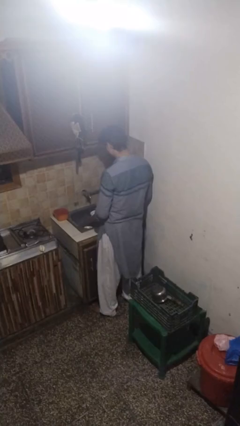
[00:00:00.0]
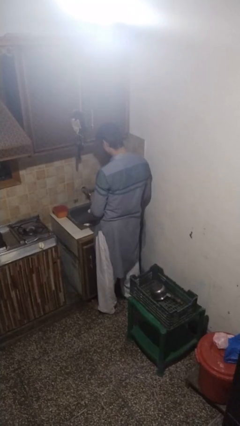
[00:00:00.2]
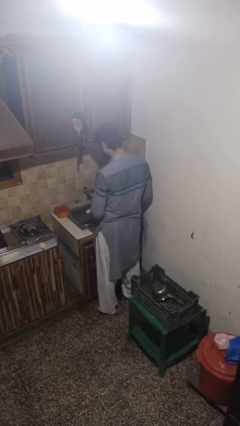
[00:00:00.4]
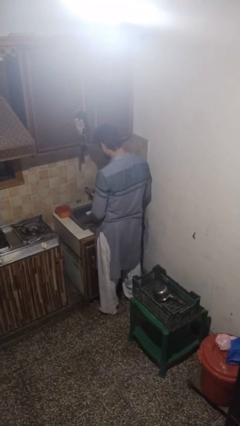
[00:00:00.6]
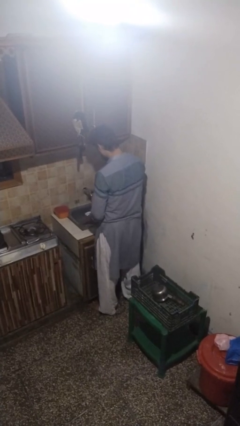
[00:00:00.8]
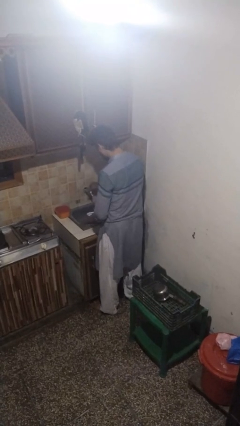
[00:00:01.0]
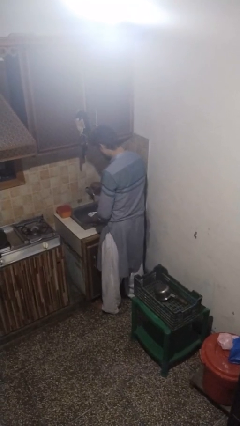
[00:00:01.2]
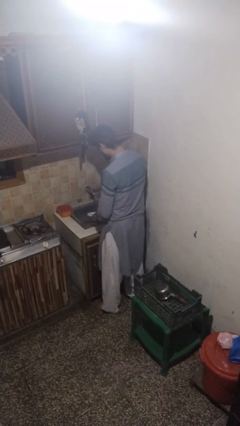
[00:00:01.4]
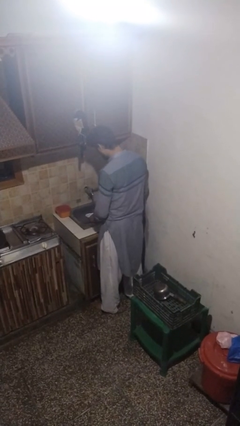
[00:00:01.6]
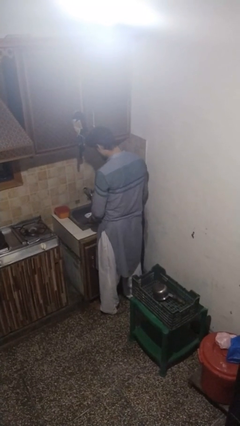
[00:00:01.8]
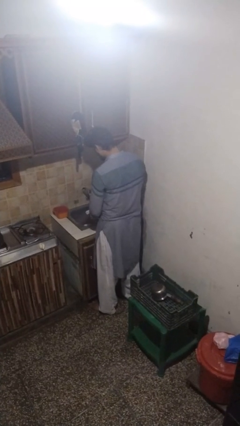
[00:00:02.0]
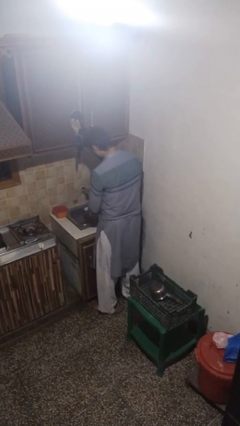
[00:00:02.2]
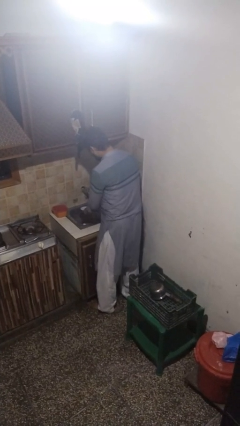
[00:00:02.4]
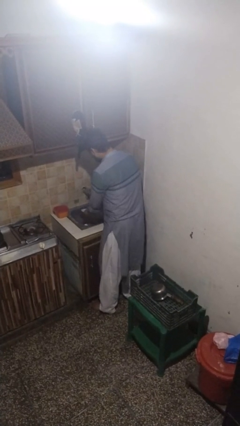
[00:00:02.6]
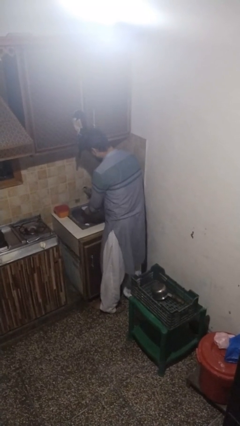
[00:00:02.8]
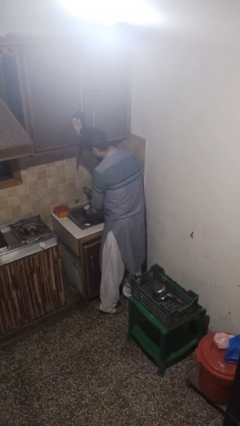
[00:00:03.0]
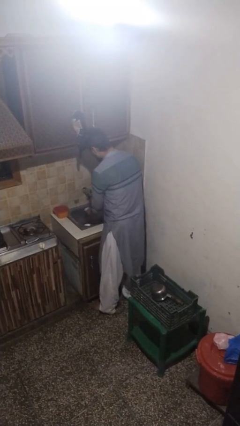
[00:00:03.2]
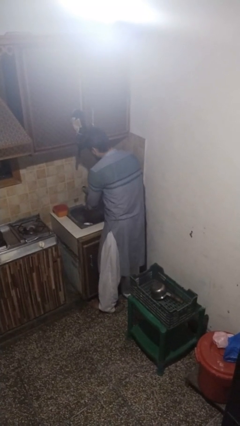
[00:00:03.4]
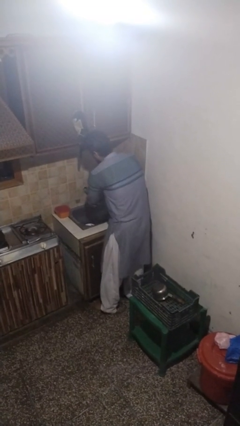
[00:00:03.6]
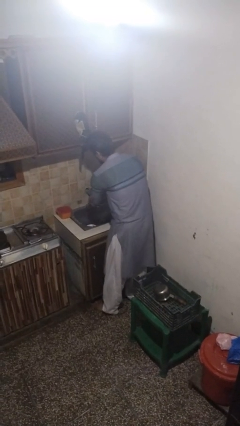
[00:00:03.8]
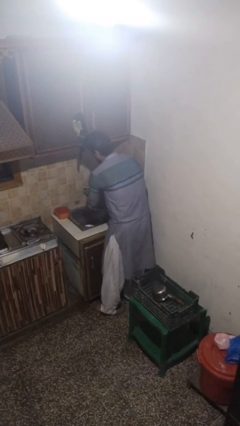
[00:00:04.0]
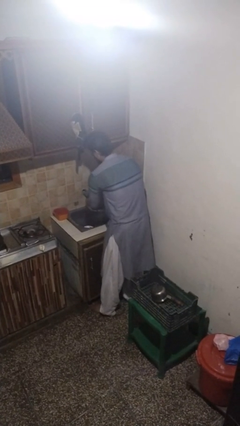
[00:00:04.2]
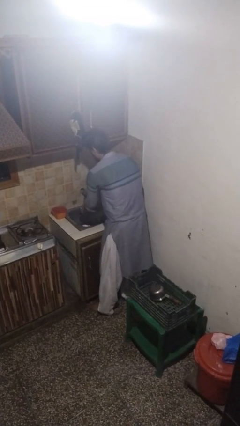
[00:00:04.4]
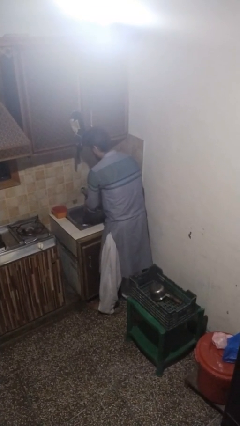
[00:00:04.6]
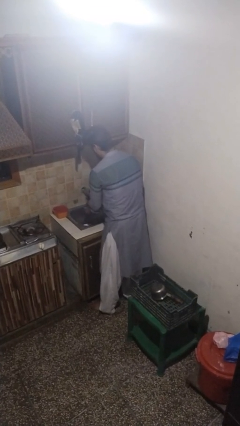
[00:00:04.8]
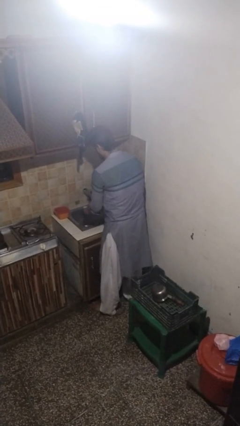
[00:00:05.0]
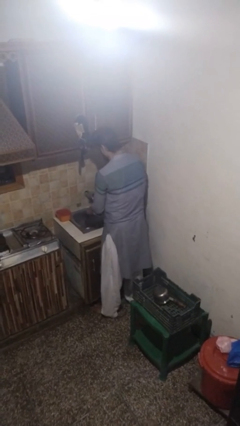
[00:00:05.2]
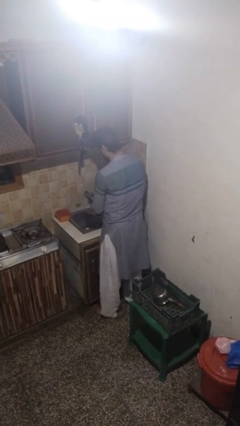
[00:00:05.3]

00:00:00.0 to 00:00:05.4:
person washes dish

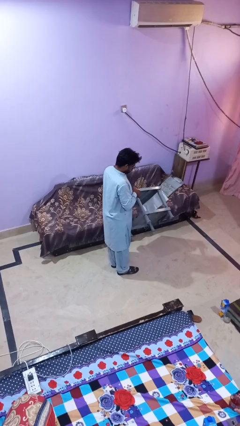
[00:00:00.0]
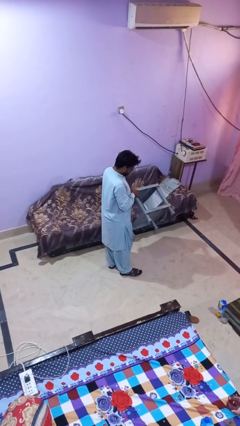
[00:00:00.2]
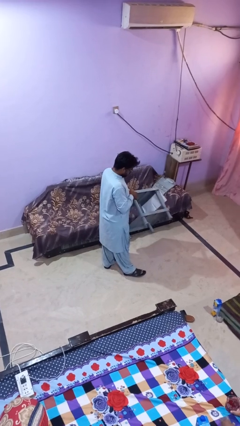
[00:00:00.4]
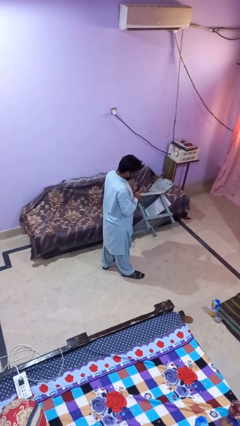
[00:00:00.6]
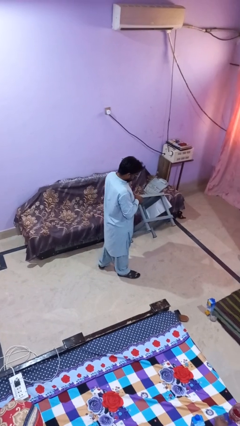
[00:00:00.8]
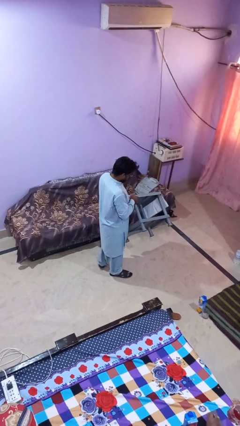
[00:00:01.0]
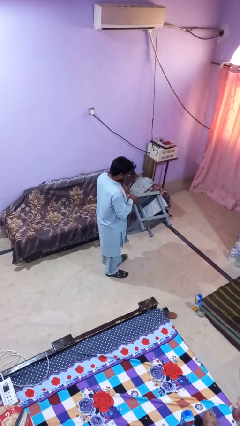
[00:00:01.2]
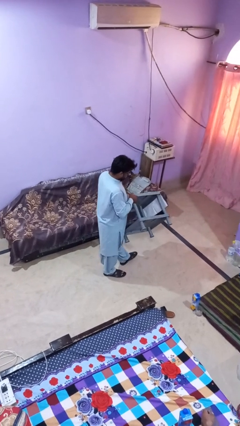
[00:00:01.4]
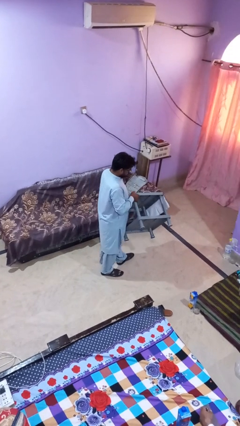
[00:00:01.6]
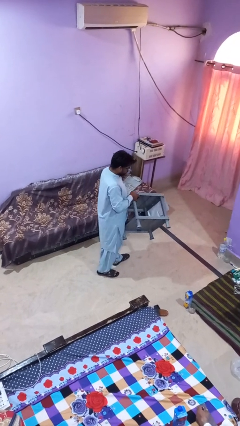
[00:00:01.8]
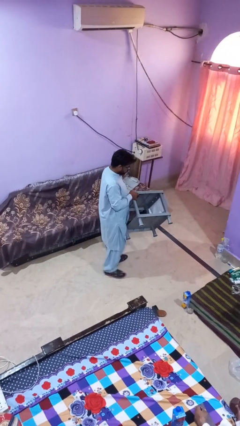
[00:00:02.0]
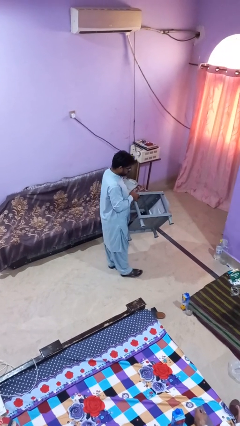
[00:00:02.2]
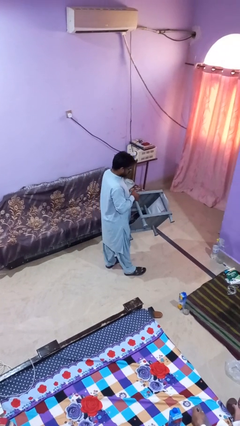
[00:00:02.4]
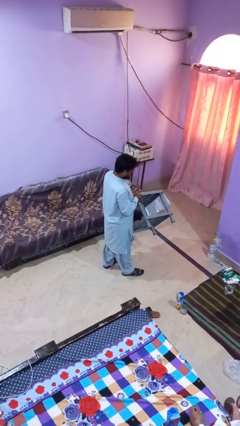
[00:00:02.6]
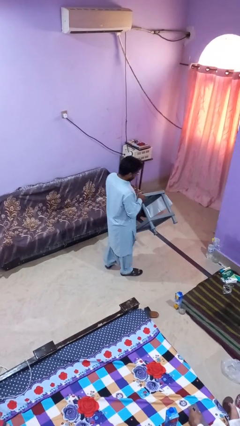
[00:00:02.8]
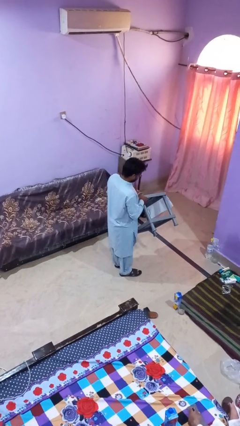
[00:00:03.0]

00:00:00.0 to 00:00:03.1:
person carries furniture

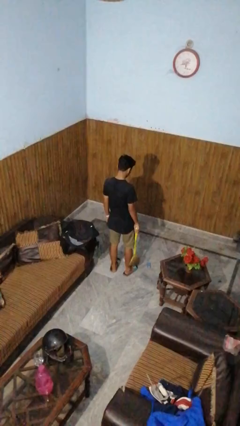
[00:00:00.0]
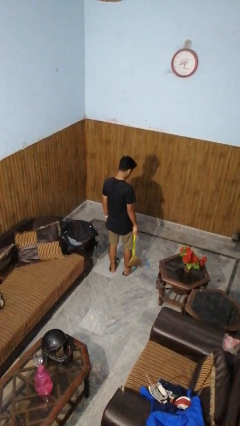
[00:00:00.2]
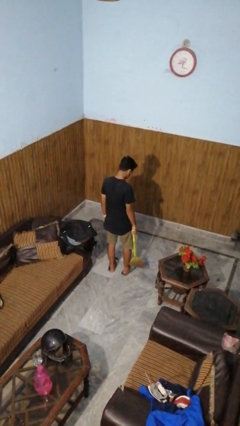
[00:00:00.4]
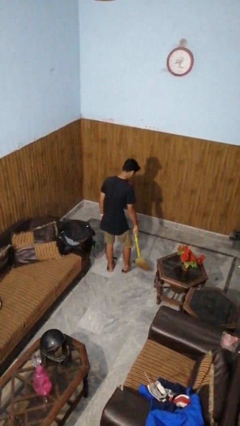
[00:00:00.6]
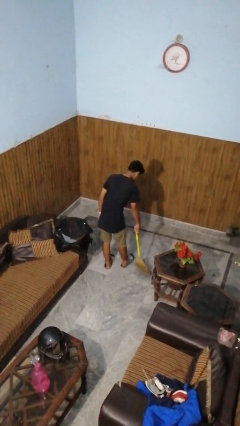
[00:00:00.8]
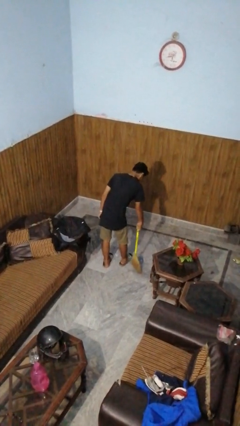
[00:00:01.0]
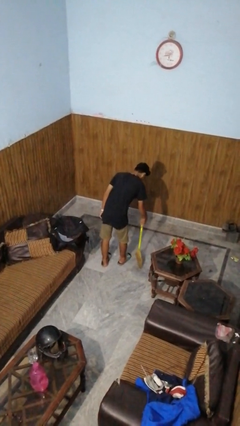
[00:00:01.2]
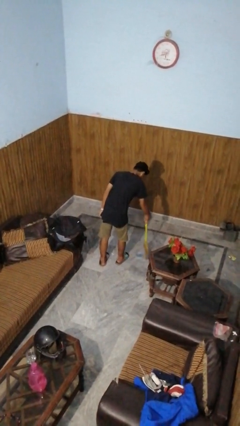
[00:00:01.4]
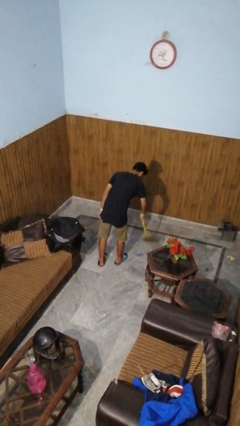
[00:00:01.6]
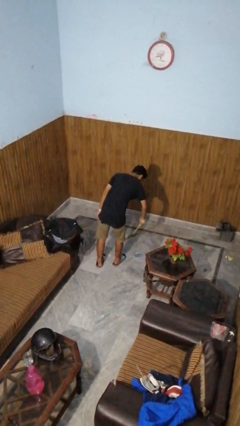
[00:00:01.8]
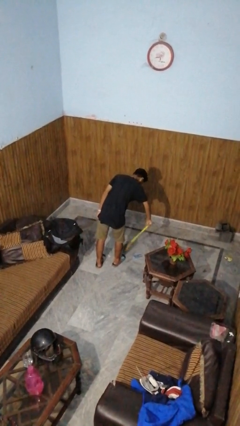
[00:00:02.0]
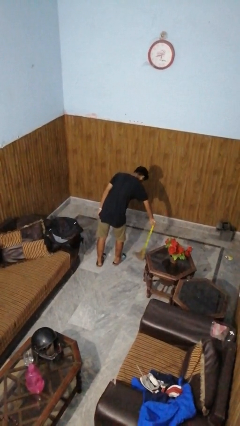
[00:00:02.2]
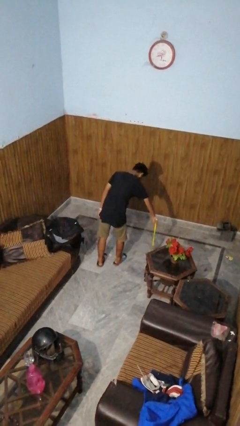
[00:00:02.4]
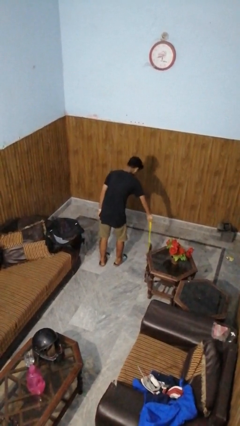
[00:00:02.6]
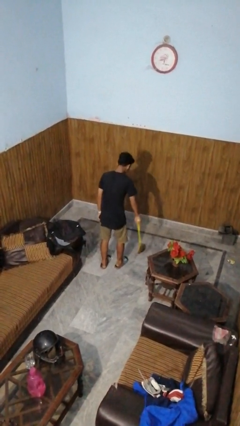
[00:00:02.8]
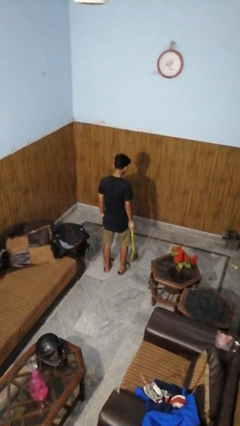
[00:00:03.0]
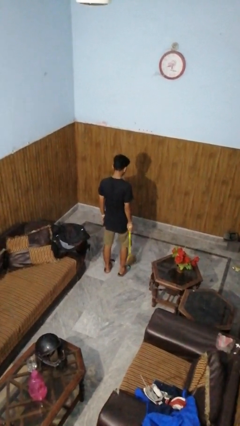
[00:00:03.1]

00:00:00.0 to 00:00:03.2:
person sweeps floor

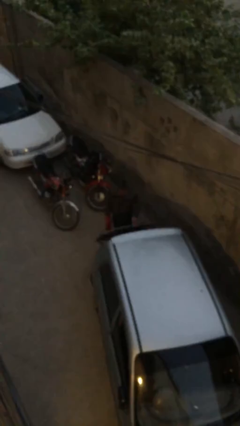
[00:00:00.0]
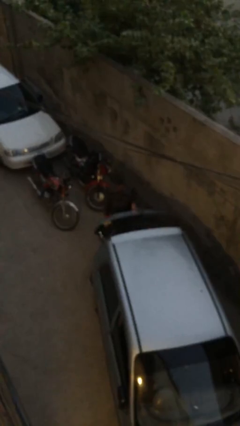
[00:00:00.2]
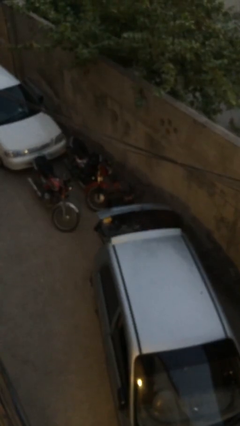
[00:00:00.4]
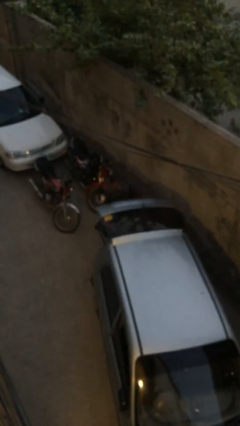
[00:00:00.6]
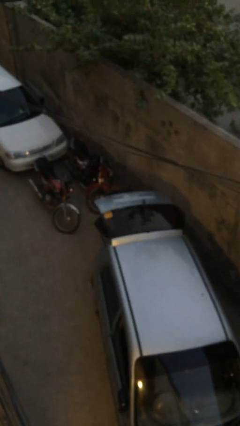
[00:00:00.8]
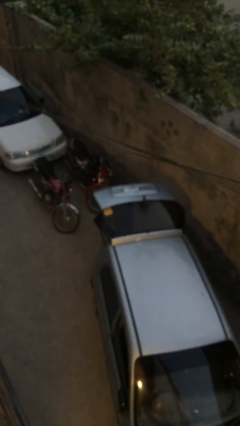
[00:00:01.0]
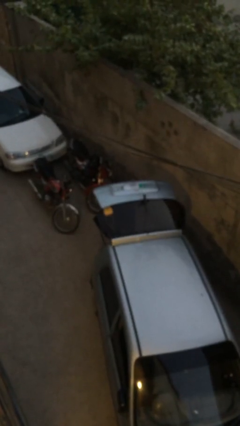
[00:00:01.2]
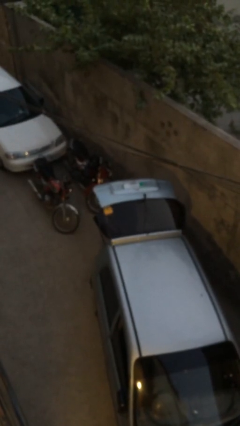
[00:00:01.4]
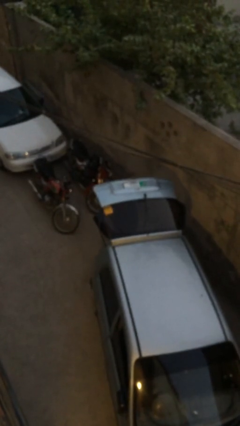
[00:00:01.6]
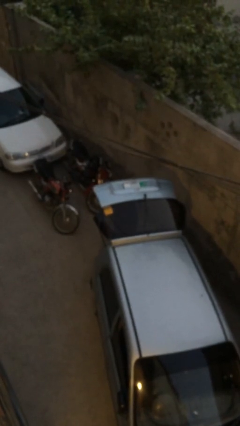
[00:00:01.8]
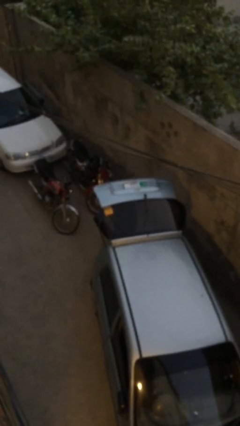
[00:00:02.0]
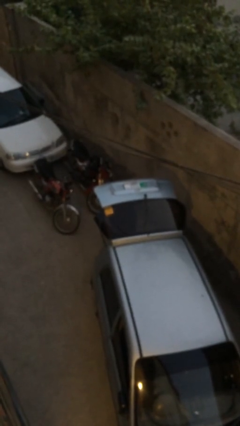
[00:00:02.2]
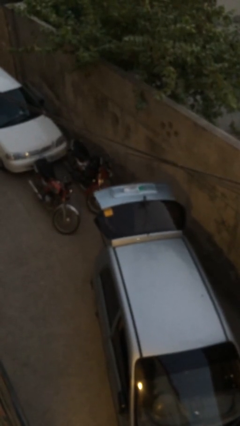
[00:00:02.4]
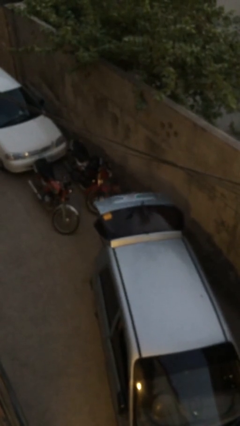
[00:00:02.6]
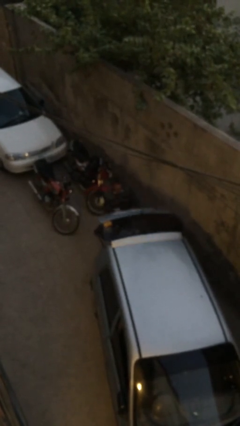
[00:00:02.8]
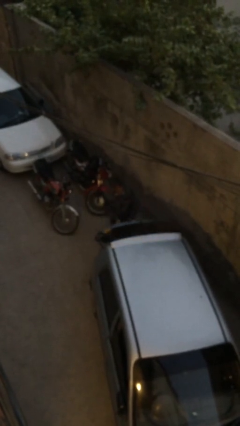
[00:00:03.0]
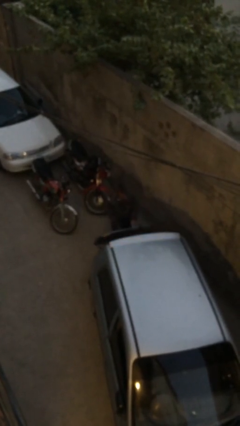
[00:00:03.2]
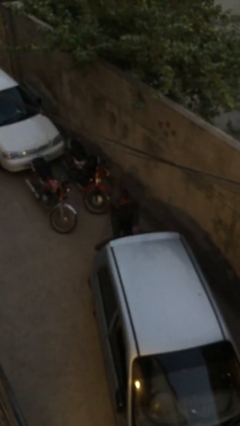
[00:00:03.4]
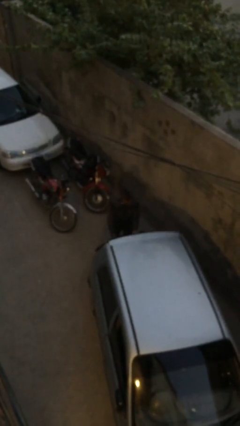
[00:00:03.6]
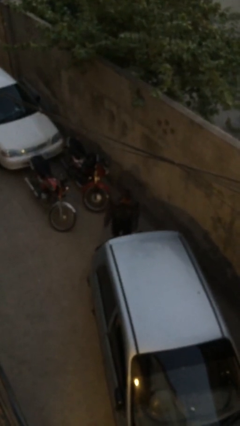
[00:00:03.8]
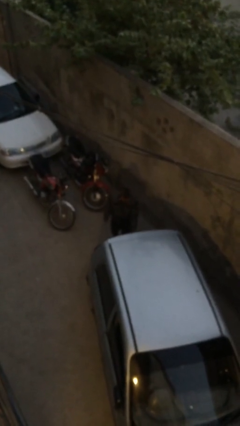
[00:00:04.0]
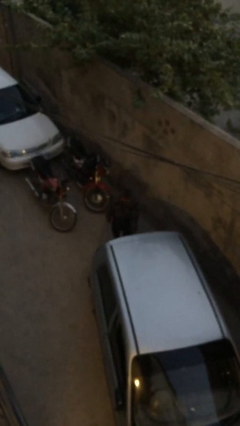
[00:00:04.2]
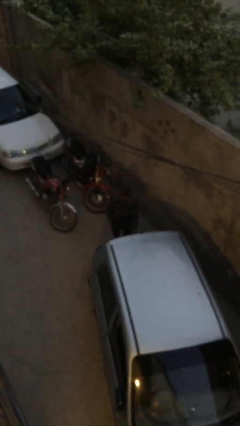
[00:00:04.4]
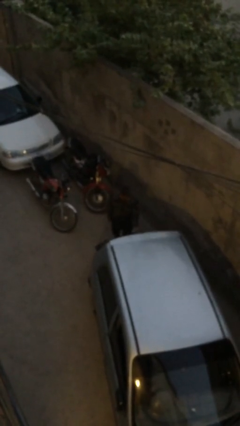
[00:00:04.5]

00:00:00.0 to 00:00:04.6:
person loads car

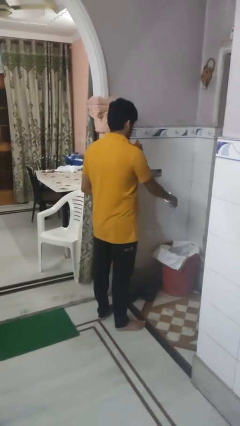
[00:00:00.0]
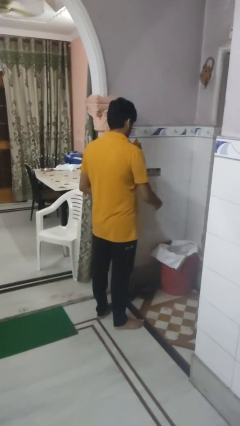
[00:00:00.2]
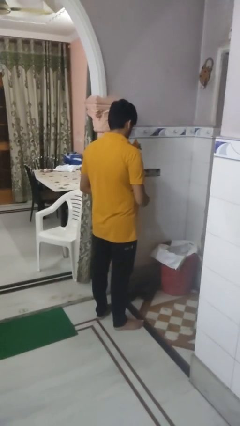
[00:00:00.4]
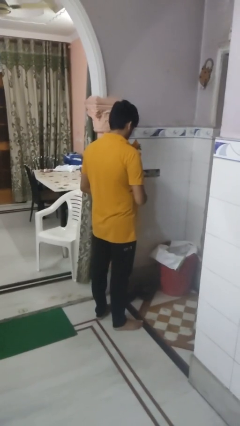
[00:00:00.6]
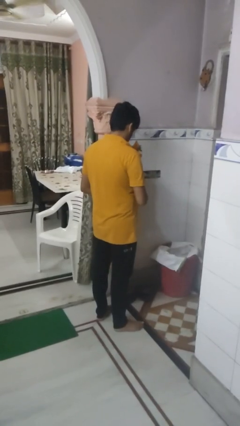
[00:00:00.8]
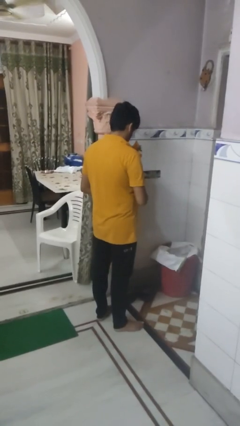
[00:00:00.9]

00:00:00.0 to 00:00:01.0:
person discards trash
